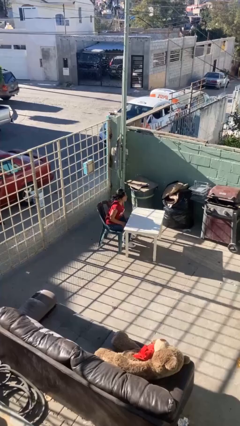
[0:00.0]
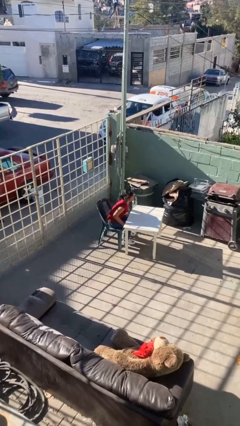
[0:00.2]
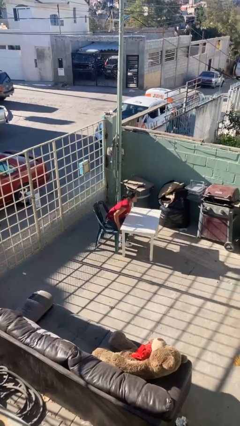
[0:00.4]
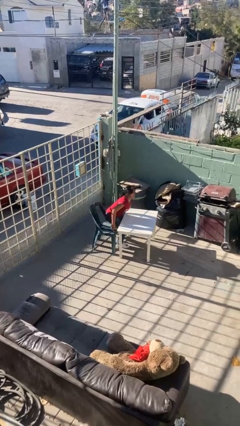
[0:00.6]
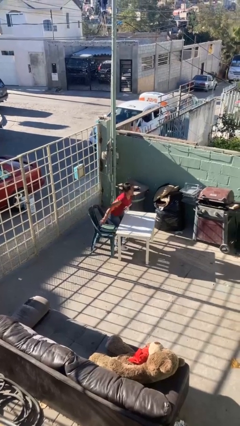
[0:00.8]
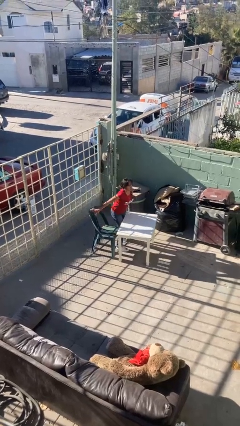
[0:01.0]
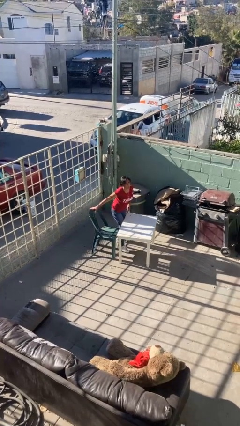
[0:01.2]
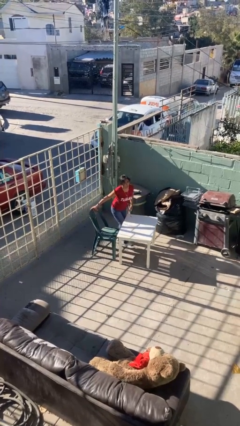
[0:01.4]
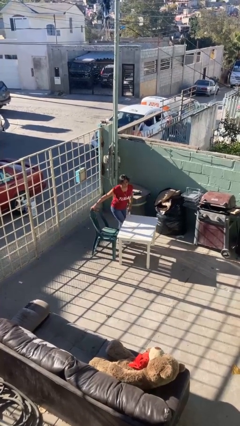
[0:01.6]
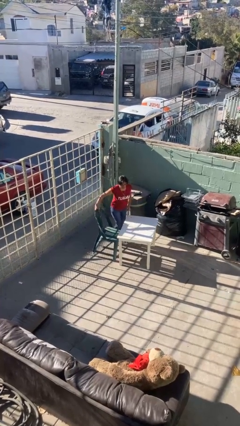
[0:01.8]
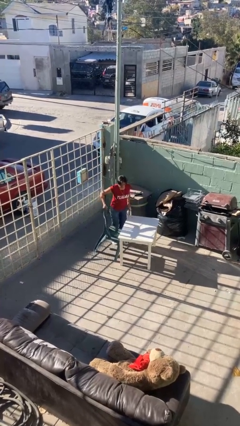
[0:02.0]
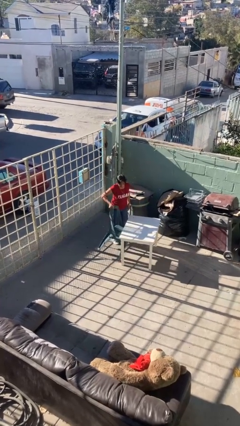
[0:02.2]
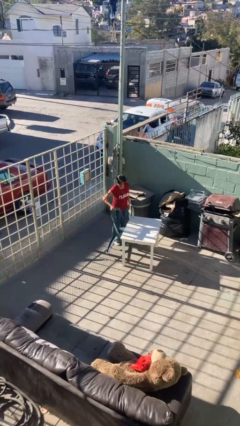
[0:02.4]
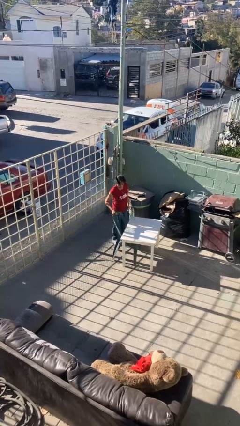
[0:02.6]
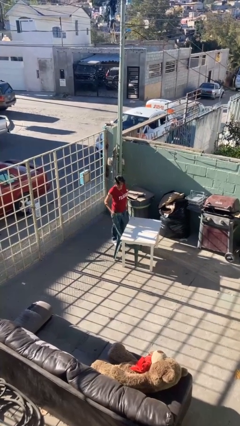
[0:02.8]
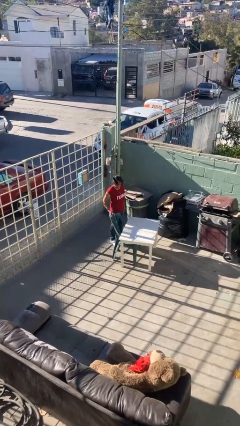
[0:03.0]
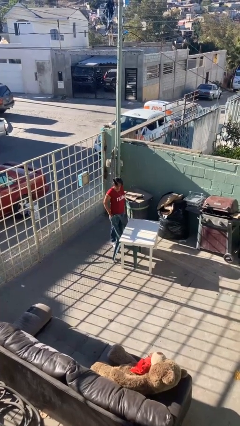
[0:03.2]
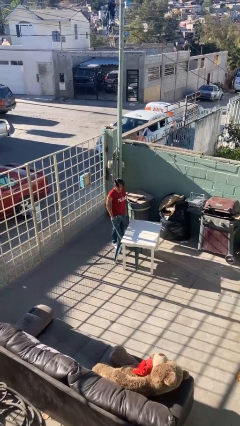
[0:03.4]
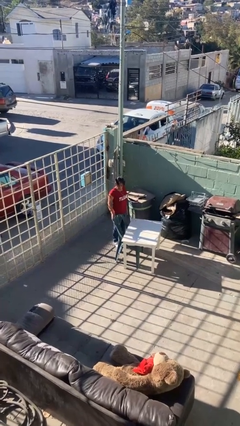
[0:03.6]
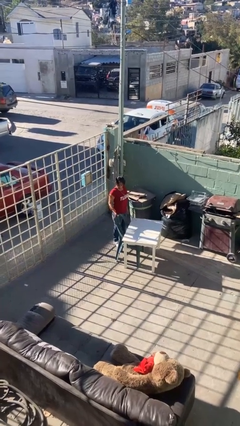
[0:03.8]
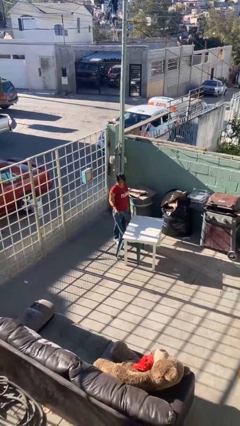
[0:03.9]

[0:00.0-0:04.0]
person stands up

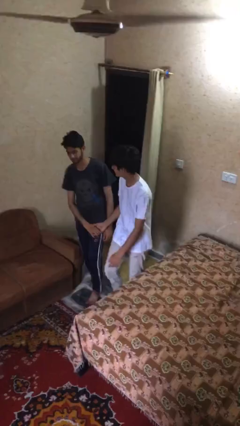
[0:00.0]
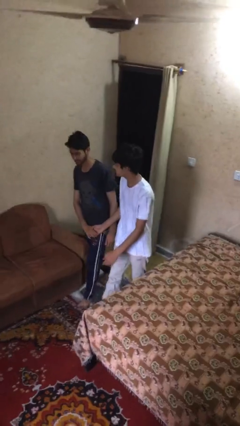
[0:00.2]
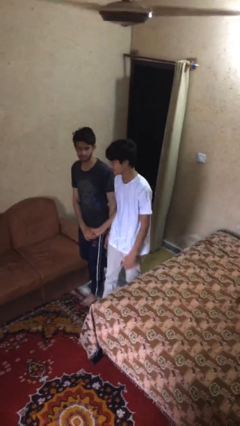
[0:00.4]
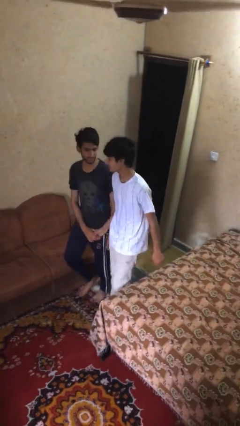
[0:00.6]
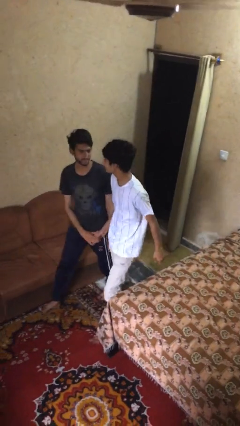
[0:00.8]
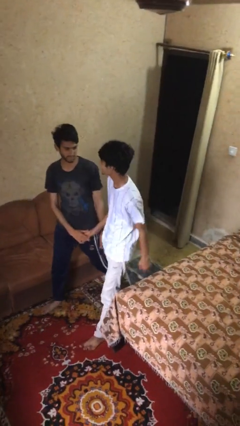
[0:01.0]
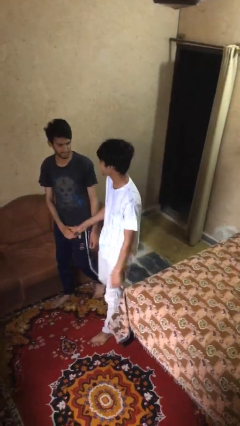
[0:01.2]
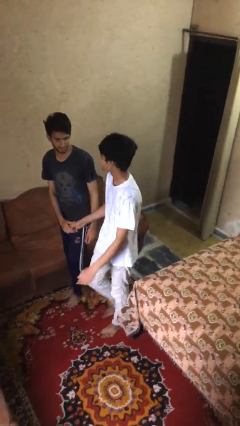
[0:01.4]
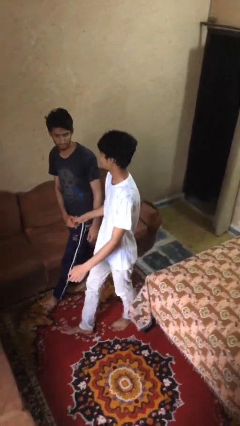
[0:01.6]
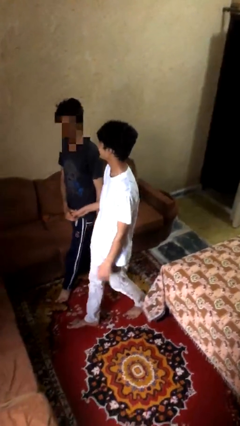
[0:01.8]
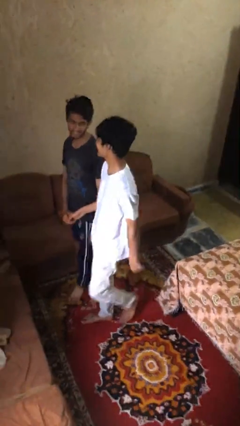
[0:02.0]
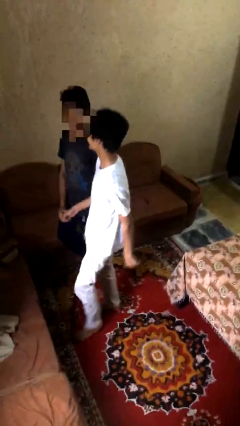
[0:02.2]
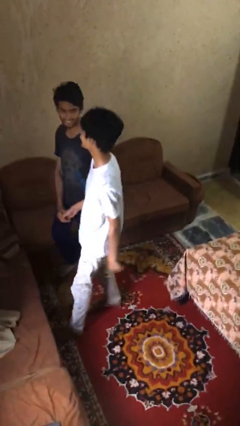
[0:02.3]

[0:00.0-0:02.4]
person talks to person

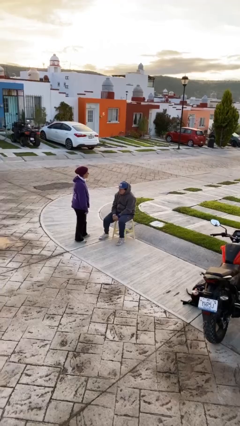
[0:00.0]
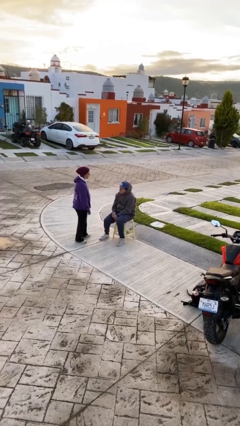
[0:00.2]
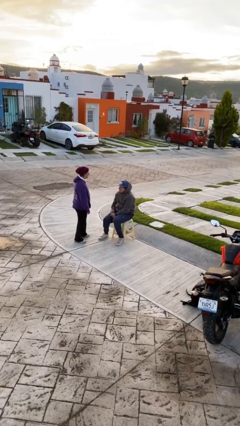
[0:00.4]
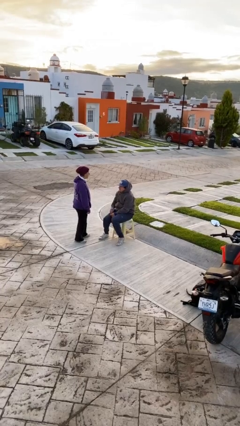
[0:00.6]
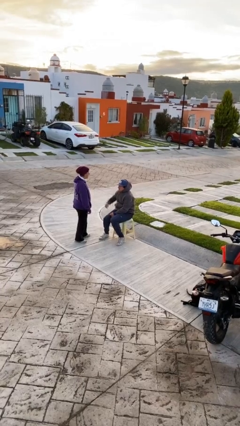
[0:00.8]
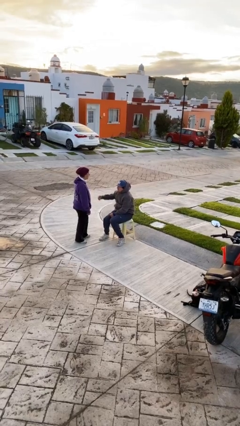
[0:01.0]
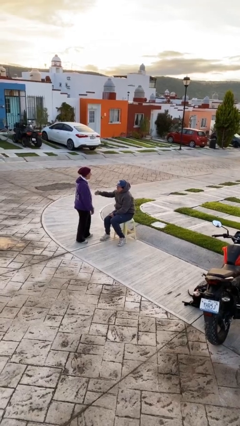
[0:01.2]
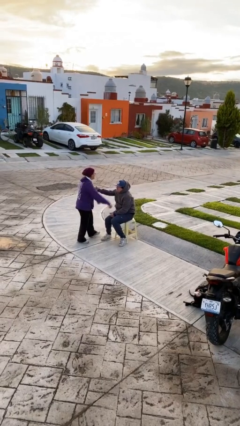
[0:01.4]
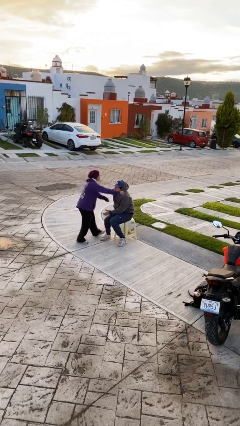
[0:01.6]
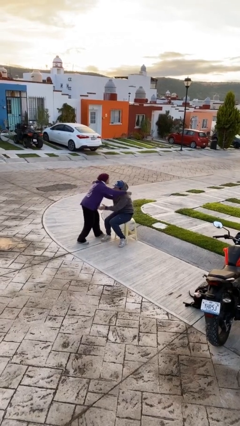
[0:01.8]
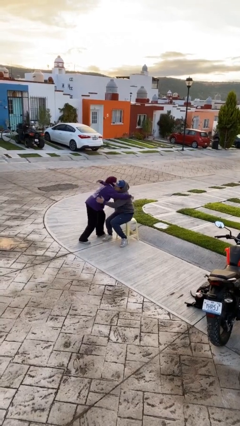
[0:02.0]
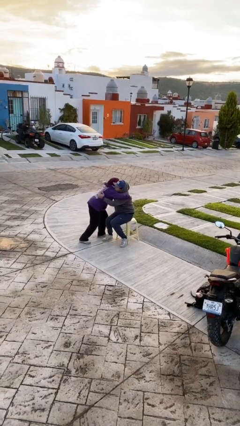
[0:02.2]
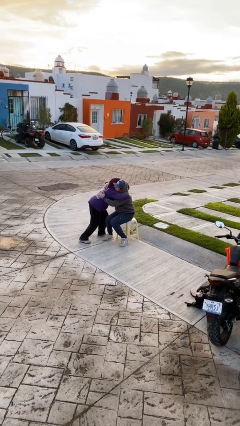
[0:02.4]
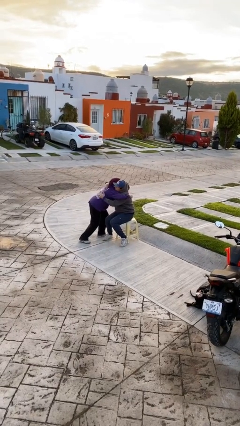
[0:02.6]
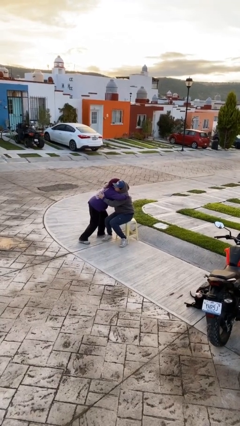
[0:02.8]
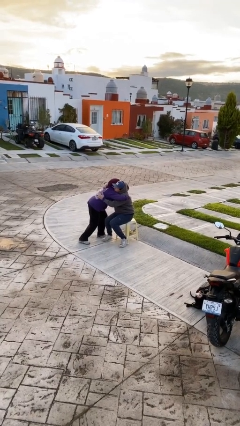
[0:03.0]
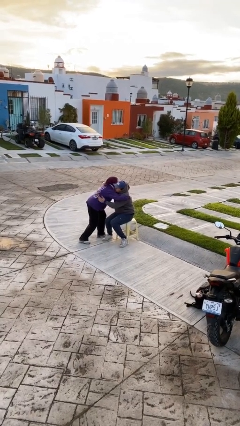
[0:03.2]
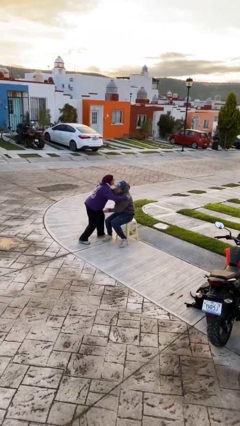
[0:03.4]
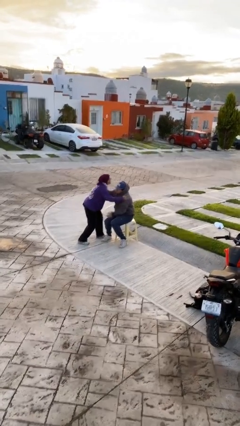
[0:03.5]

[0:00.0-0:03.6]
person embraces person

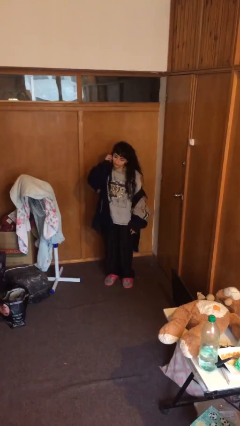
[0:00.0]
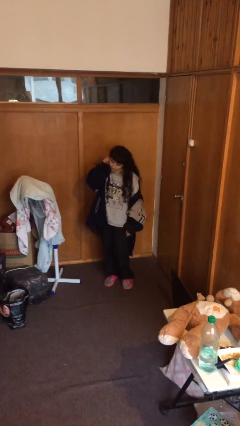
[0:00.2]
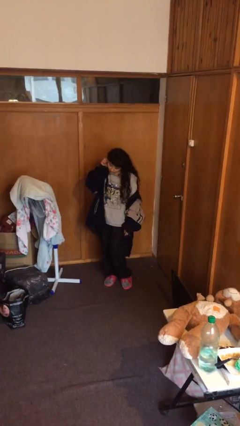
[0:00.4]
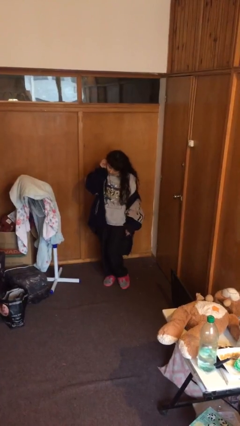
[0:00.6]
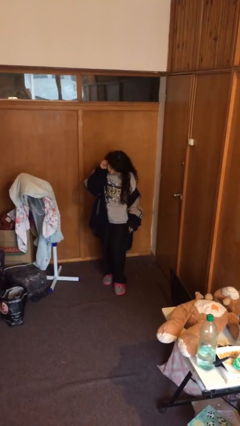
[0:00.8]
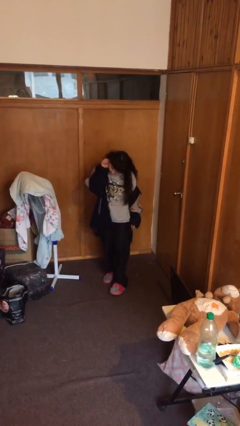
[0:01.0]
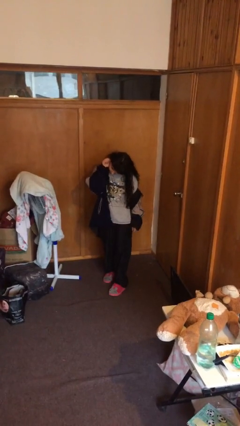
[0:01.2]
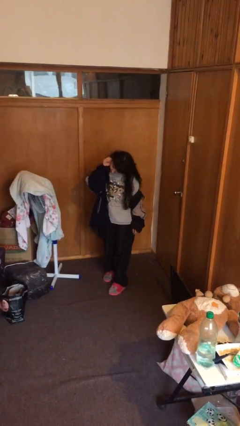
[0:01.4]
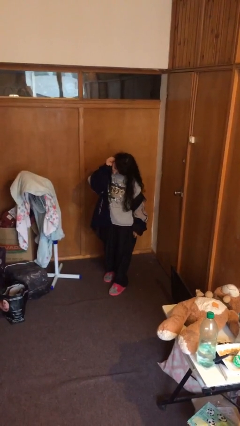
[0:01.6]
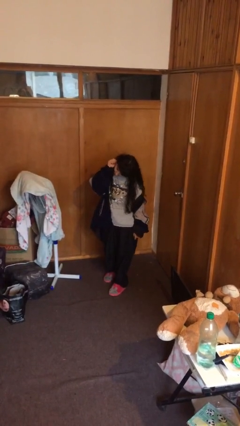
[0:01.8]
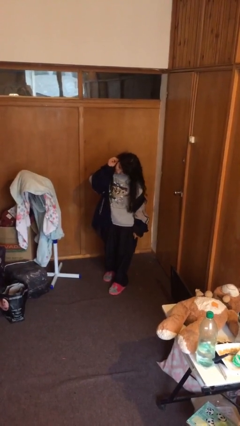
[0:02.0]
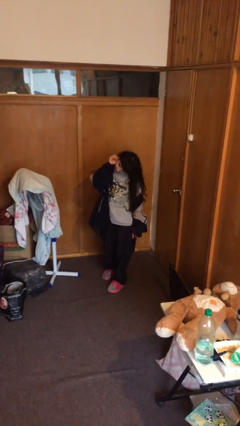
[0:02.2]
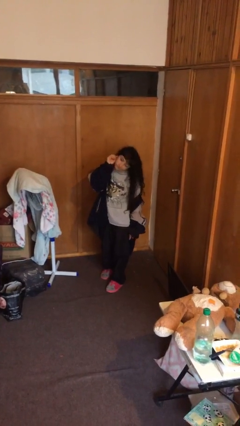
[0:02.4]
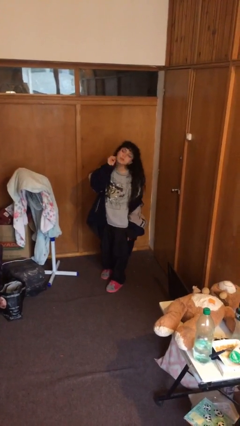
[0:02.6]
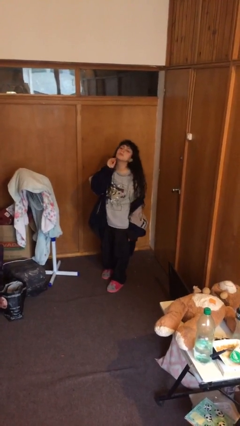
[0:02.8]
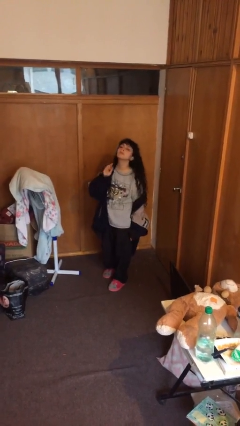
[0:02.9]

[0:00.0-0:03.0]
person touches earlobe

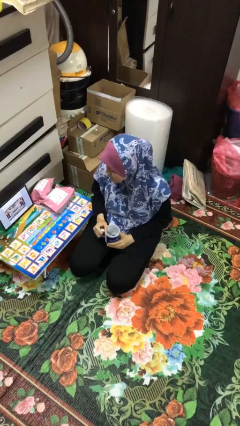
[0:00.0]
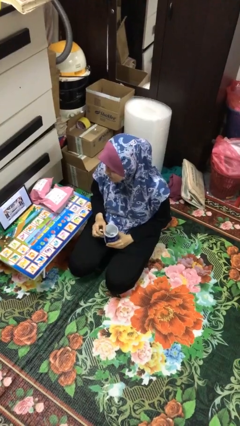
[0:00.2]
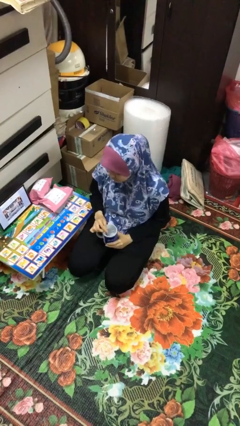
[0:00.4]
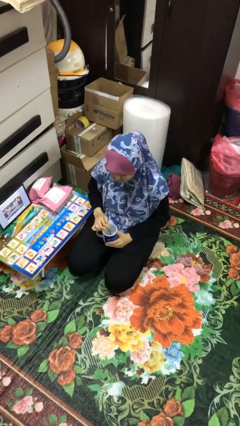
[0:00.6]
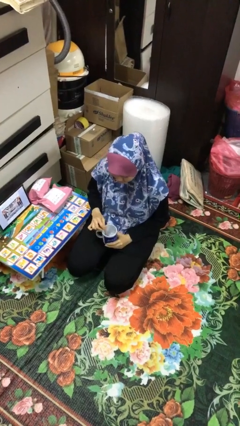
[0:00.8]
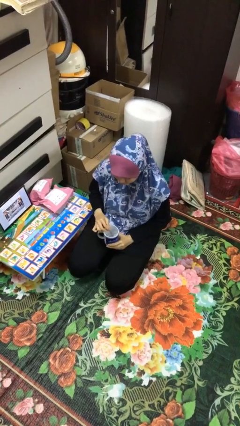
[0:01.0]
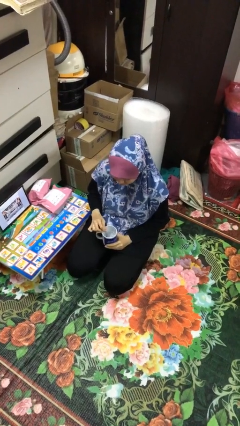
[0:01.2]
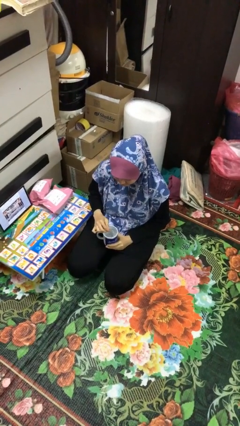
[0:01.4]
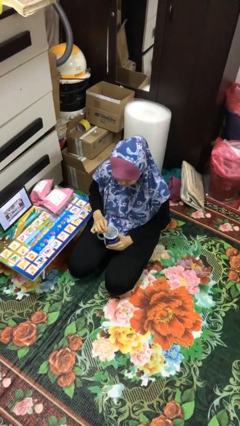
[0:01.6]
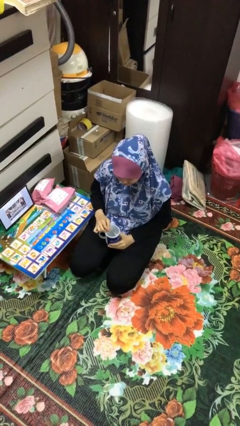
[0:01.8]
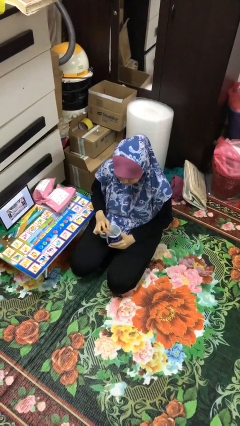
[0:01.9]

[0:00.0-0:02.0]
person stirs mug

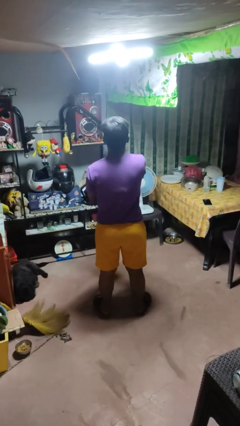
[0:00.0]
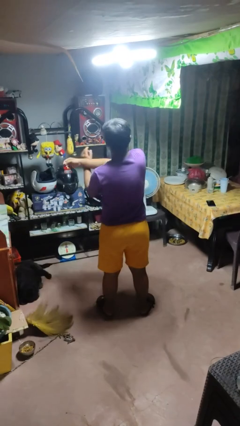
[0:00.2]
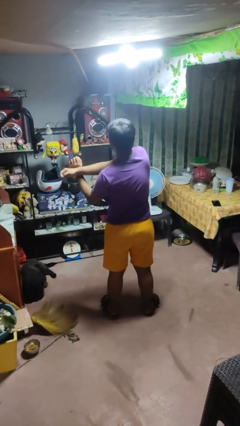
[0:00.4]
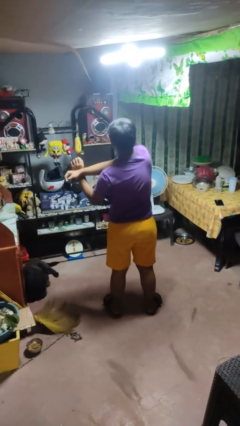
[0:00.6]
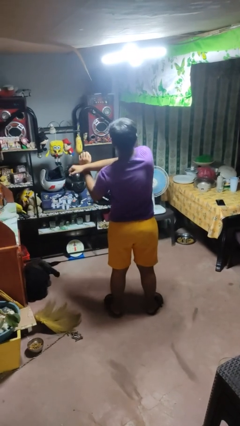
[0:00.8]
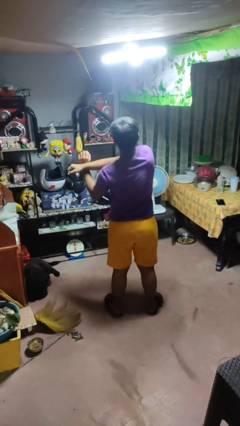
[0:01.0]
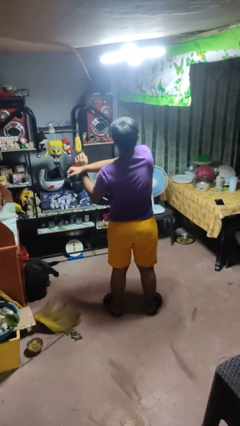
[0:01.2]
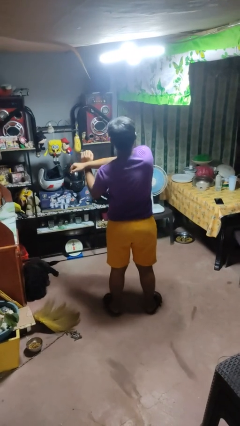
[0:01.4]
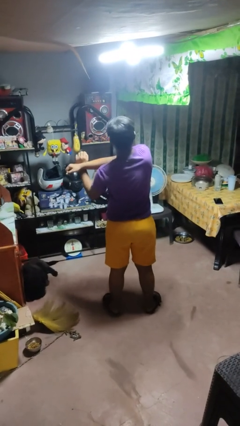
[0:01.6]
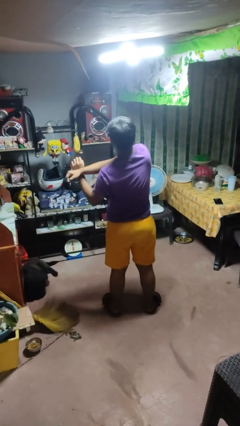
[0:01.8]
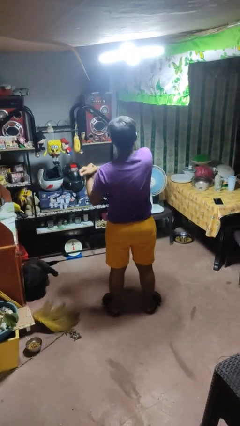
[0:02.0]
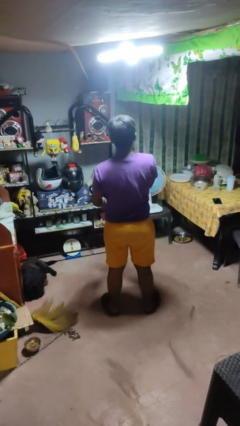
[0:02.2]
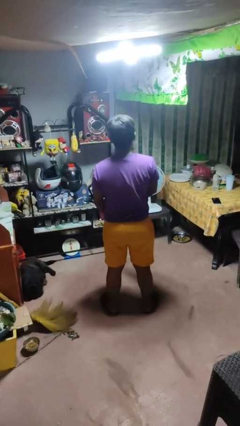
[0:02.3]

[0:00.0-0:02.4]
person crosses arms
